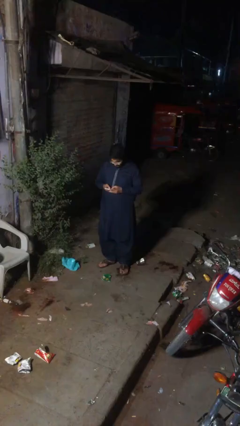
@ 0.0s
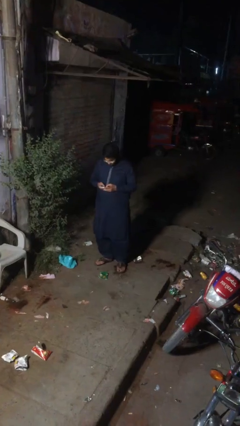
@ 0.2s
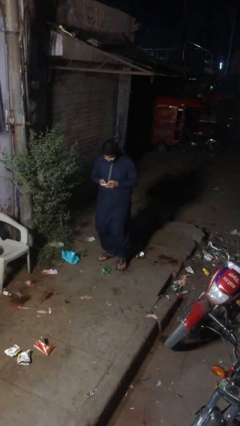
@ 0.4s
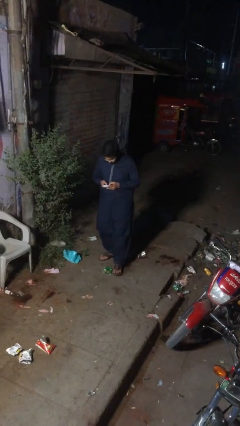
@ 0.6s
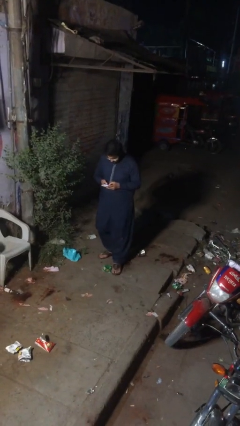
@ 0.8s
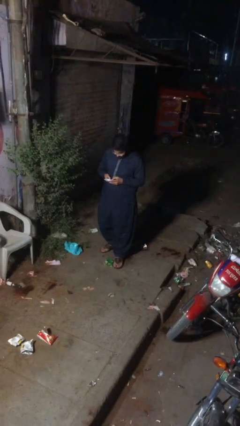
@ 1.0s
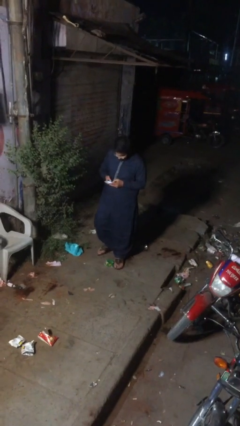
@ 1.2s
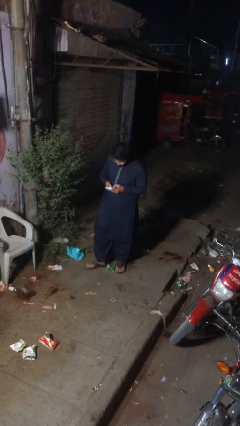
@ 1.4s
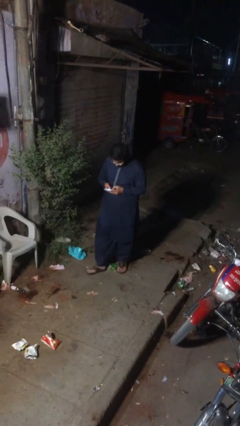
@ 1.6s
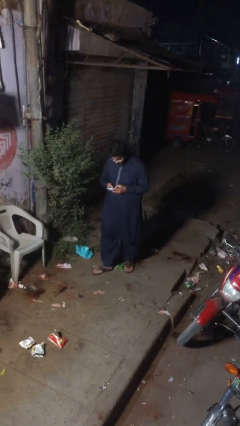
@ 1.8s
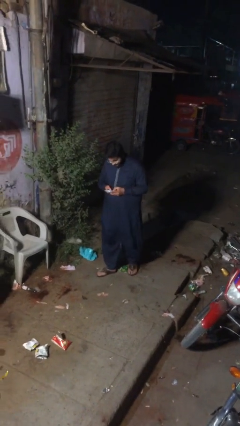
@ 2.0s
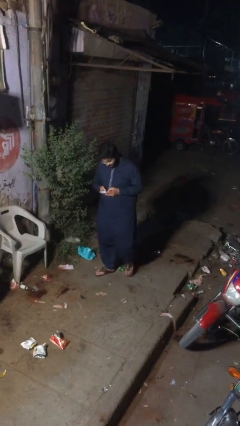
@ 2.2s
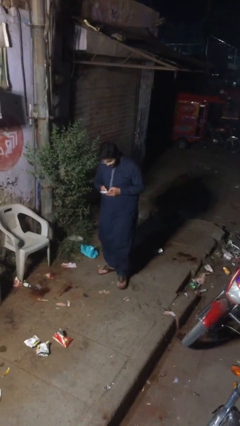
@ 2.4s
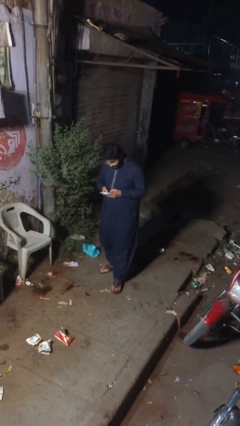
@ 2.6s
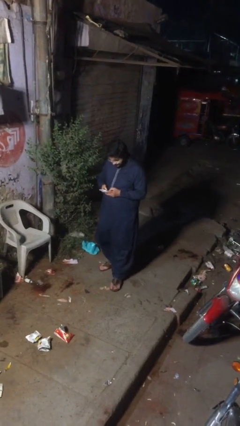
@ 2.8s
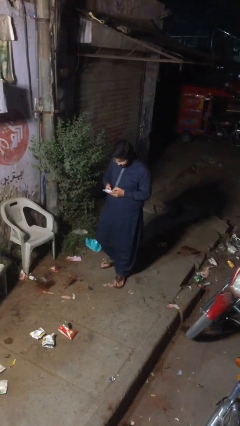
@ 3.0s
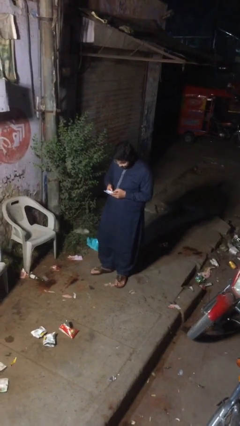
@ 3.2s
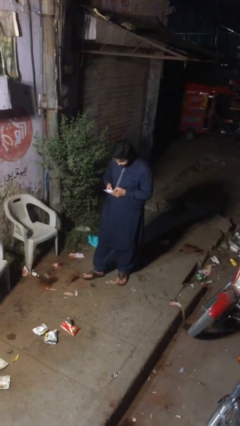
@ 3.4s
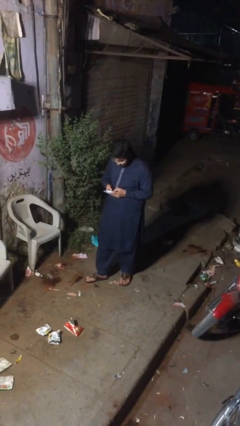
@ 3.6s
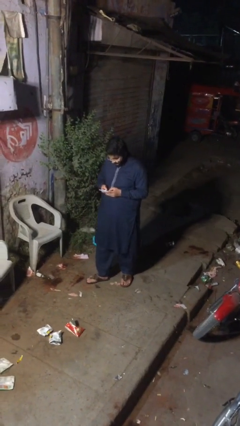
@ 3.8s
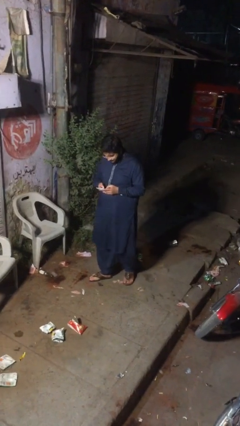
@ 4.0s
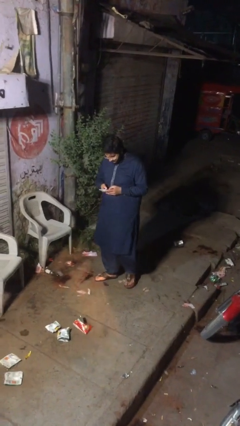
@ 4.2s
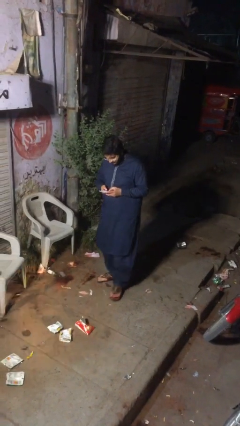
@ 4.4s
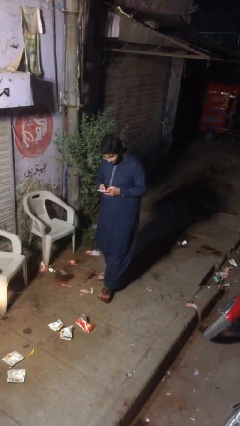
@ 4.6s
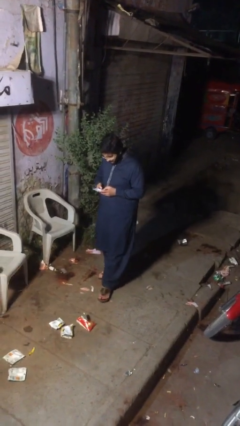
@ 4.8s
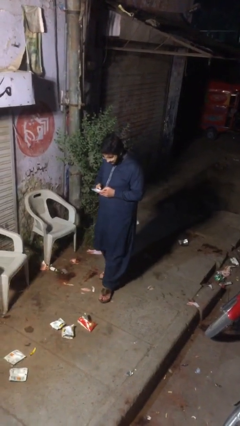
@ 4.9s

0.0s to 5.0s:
person texts on phone

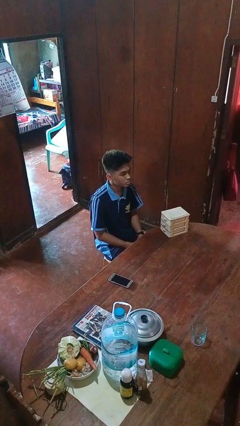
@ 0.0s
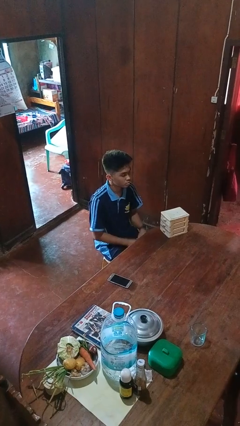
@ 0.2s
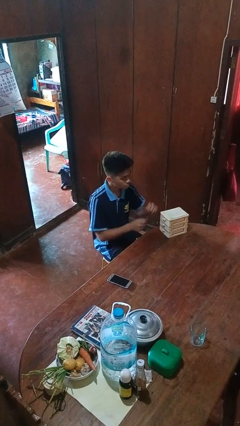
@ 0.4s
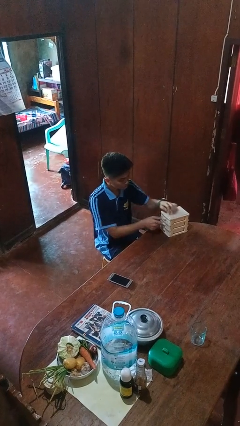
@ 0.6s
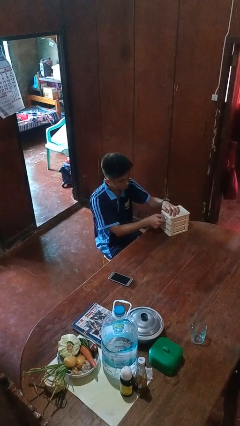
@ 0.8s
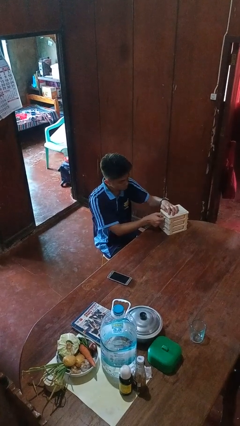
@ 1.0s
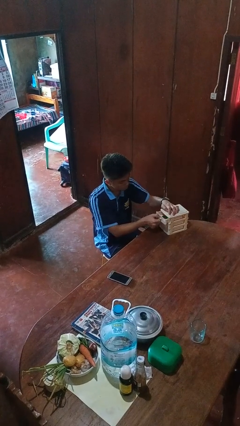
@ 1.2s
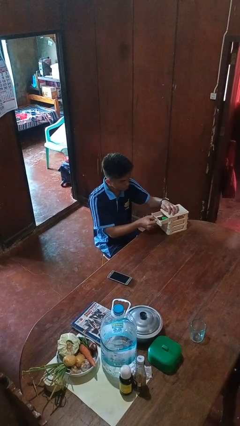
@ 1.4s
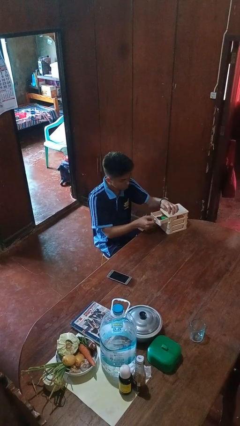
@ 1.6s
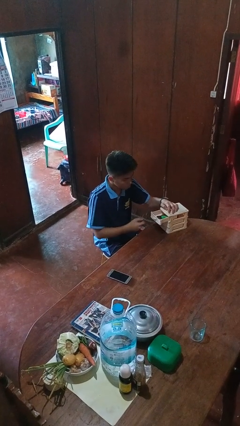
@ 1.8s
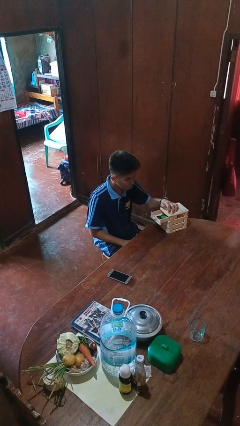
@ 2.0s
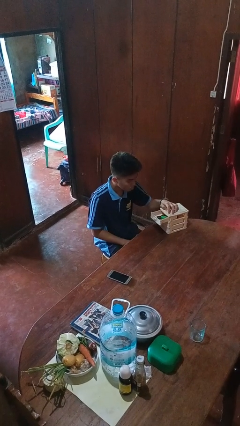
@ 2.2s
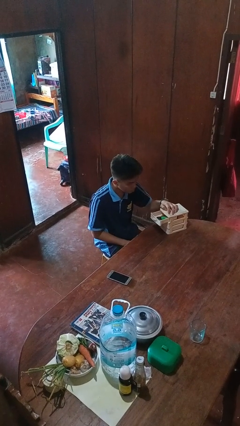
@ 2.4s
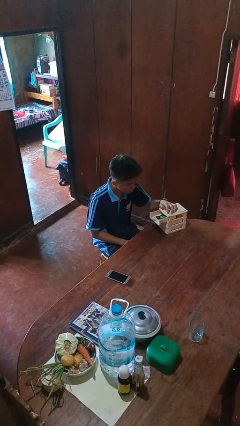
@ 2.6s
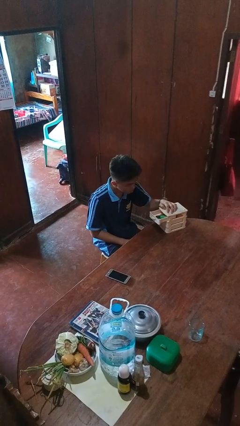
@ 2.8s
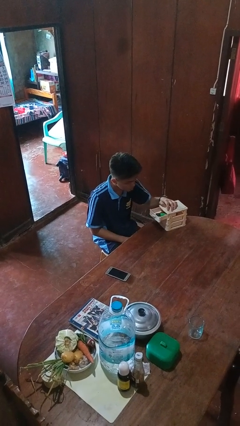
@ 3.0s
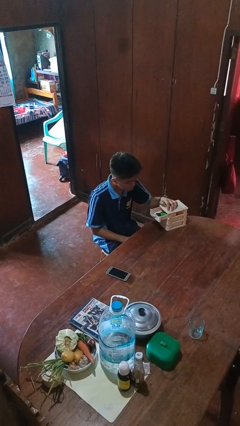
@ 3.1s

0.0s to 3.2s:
person opens jewelry box

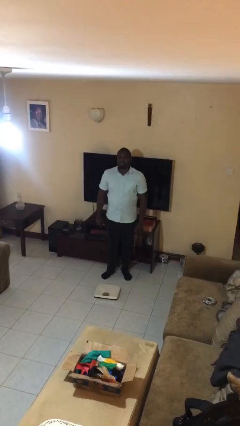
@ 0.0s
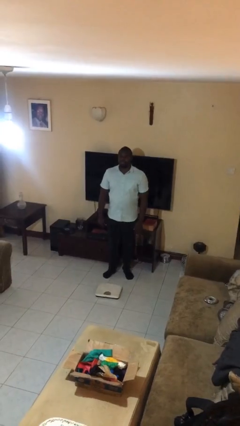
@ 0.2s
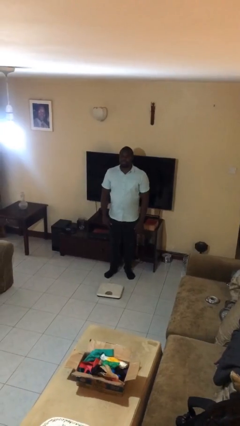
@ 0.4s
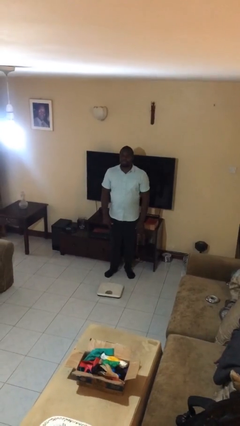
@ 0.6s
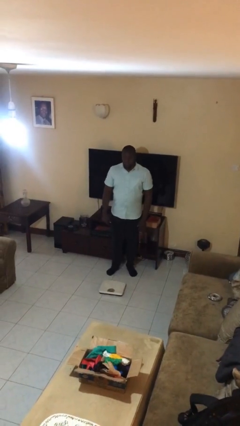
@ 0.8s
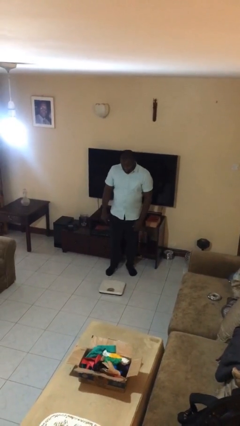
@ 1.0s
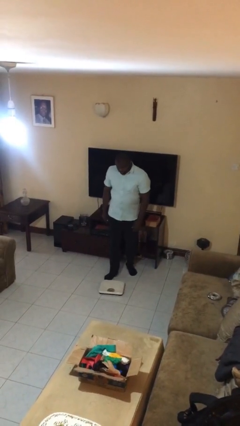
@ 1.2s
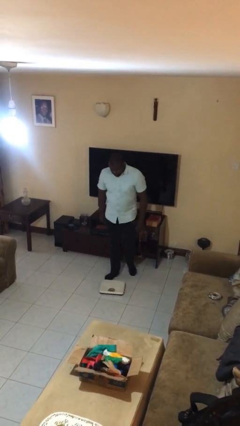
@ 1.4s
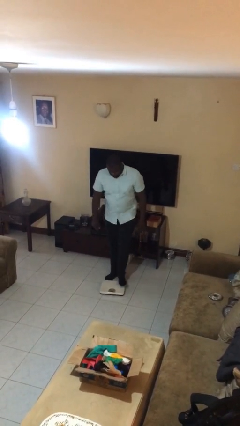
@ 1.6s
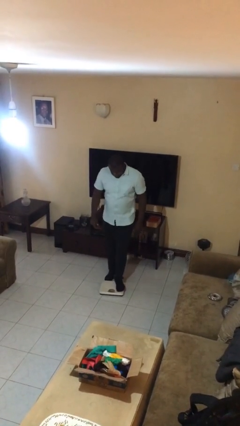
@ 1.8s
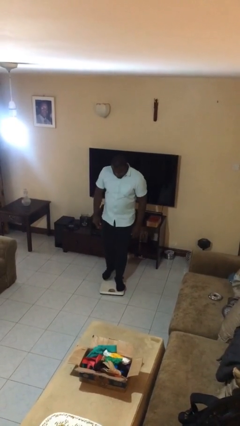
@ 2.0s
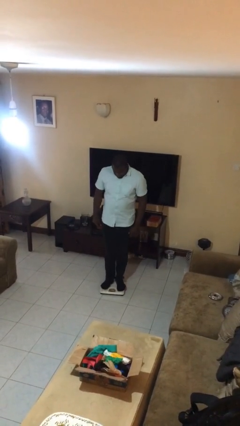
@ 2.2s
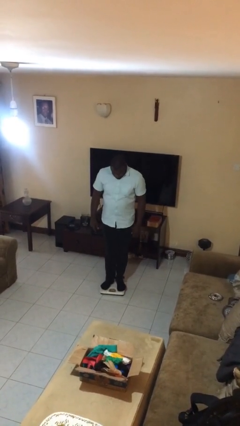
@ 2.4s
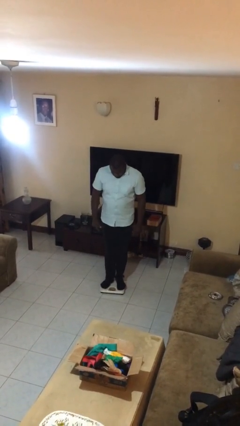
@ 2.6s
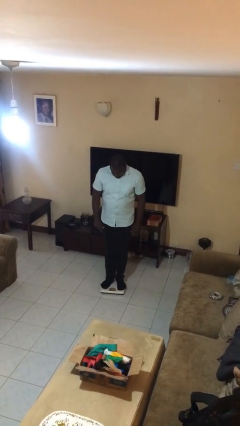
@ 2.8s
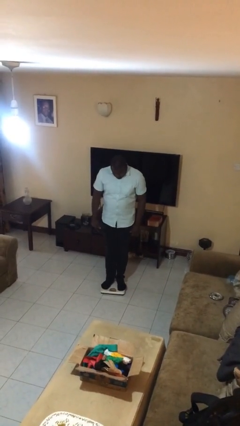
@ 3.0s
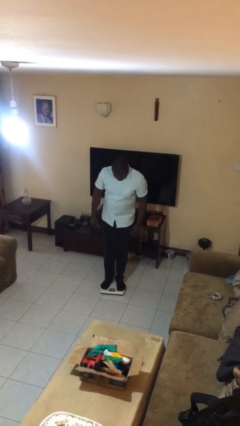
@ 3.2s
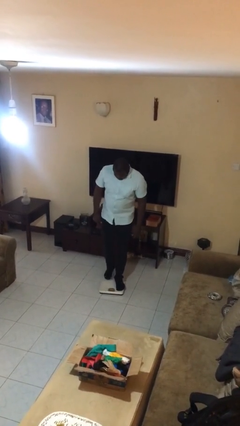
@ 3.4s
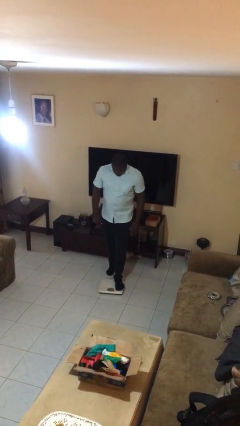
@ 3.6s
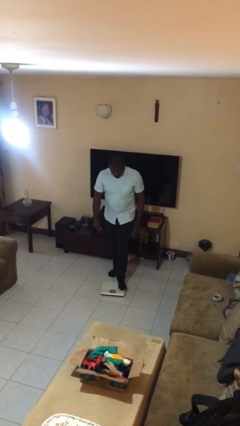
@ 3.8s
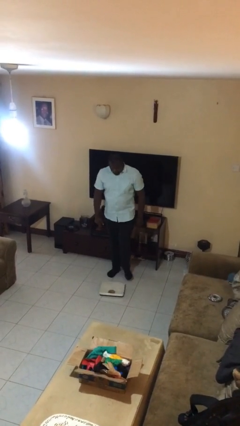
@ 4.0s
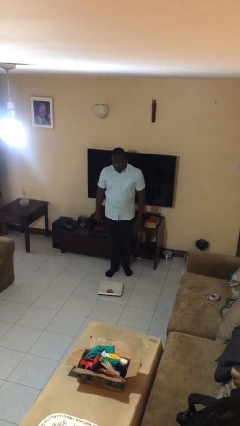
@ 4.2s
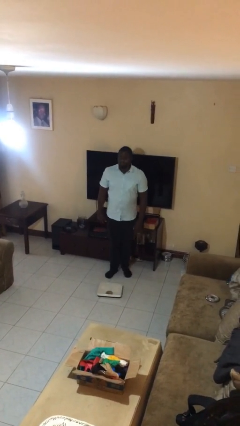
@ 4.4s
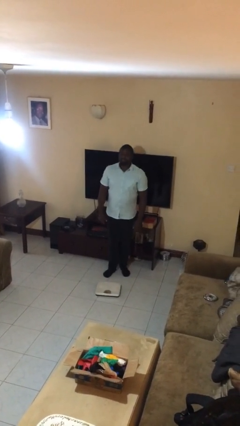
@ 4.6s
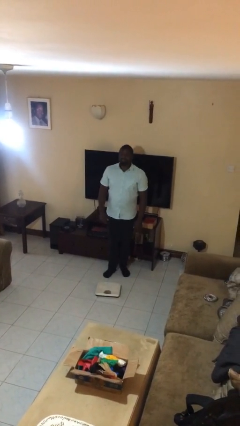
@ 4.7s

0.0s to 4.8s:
person uses bodyweight scale

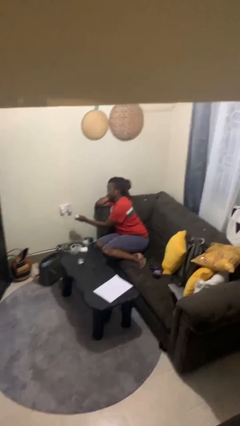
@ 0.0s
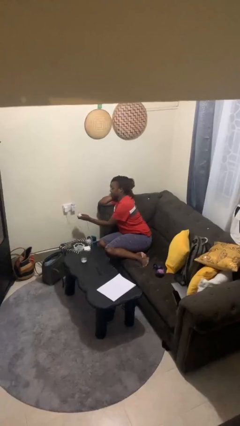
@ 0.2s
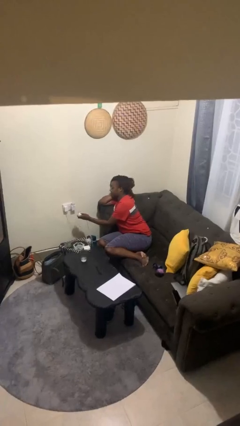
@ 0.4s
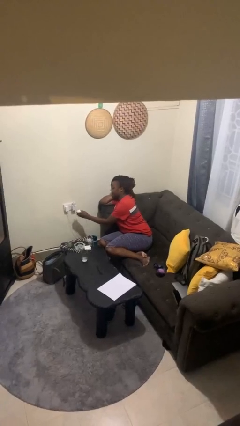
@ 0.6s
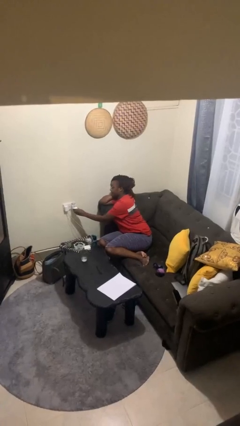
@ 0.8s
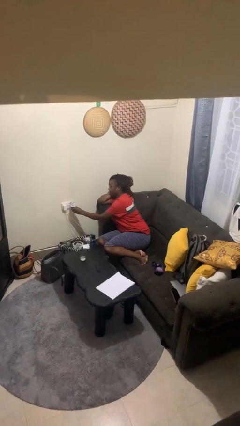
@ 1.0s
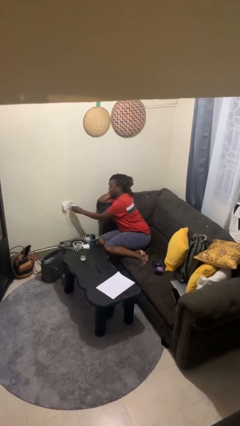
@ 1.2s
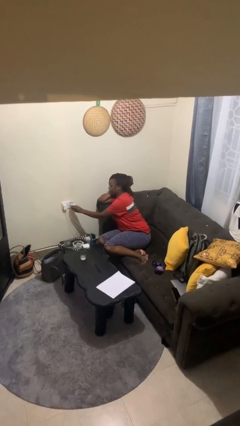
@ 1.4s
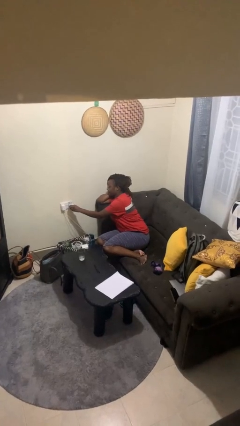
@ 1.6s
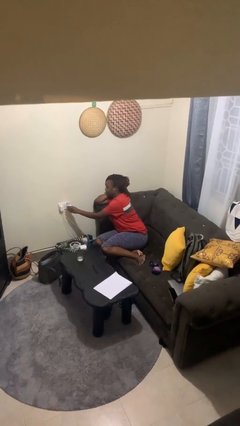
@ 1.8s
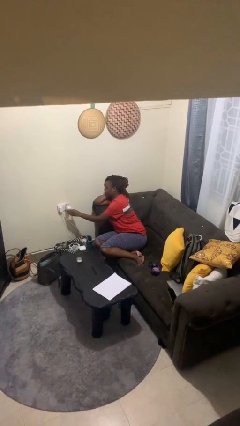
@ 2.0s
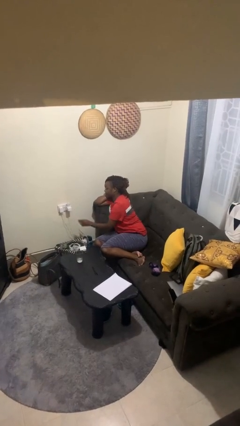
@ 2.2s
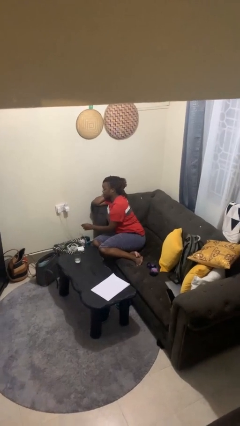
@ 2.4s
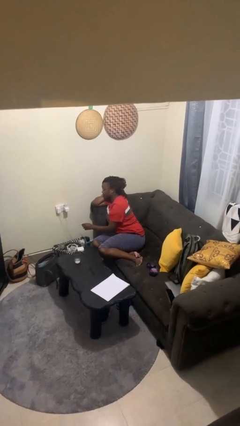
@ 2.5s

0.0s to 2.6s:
person plugs into electrical socket

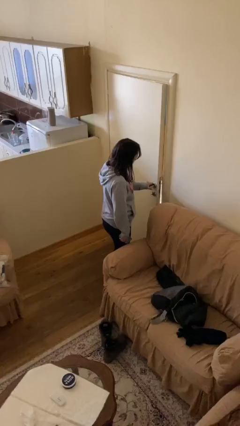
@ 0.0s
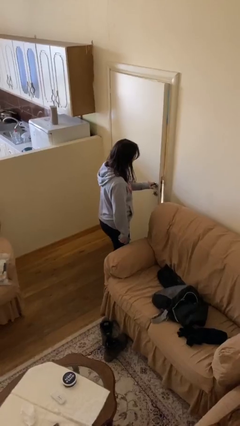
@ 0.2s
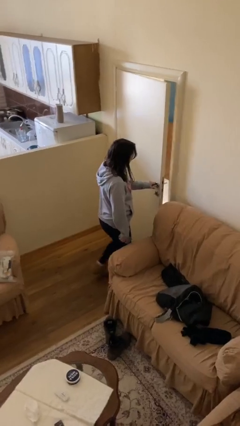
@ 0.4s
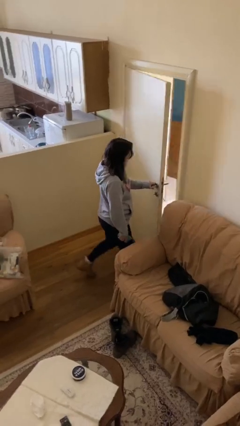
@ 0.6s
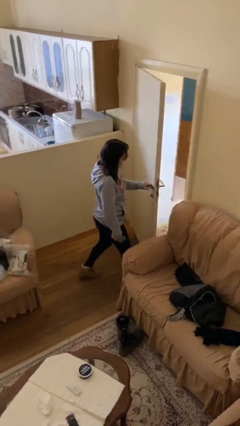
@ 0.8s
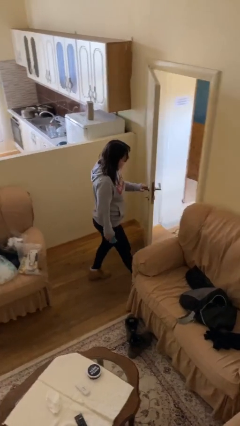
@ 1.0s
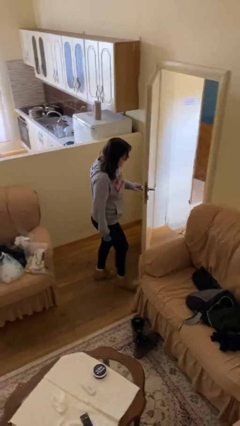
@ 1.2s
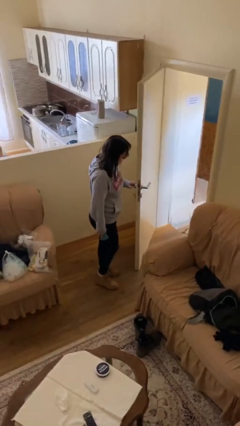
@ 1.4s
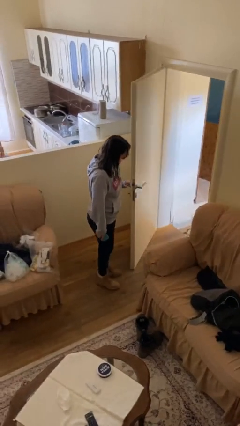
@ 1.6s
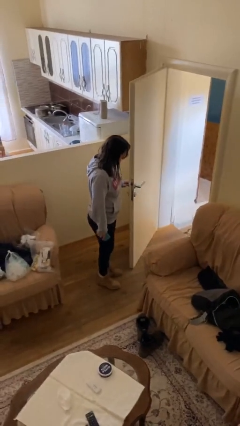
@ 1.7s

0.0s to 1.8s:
person opens facility door

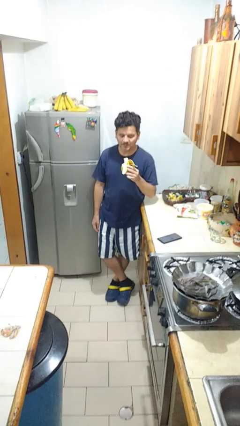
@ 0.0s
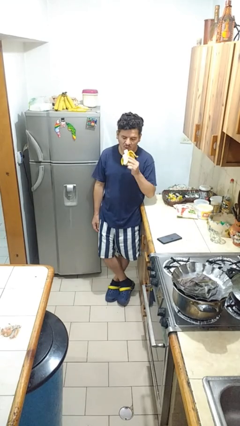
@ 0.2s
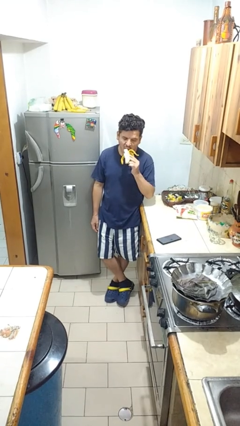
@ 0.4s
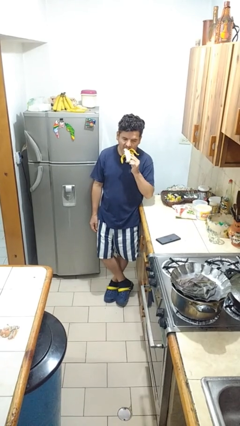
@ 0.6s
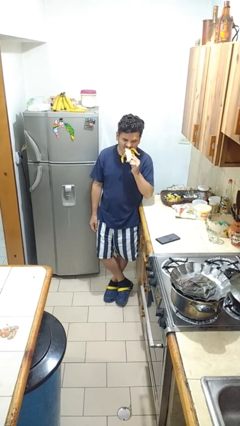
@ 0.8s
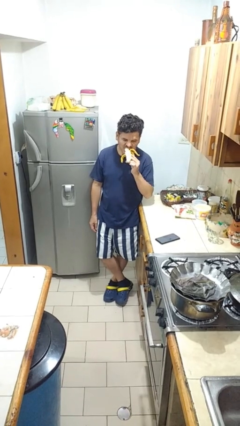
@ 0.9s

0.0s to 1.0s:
person eats banana
